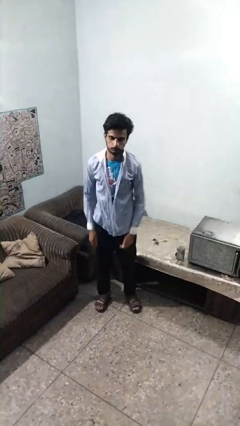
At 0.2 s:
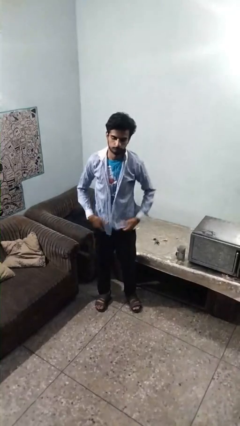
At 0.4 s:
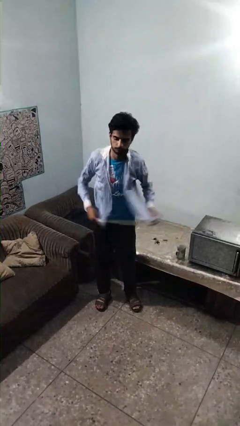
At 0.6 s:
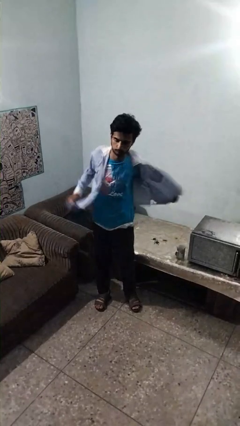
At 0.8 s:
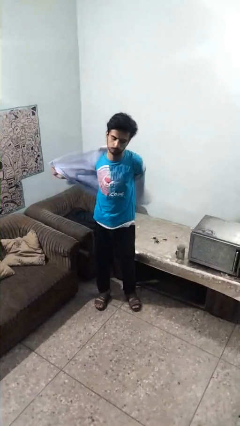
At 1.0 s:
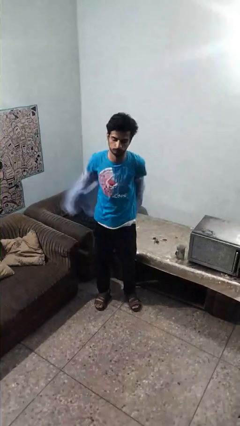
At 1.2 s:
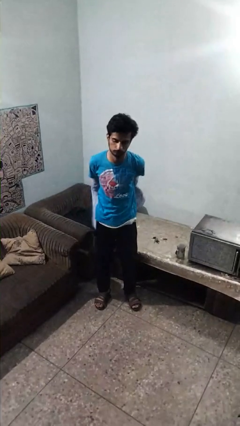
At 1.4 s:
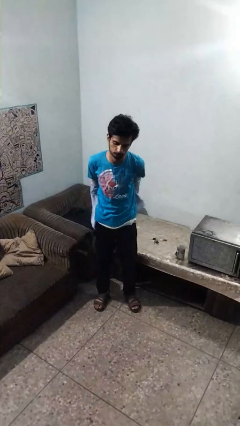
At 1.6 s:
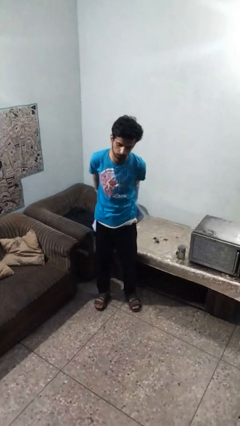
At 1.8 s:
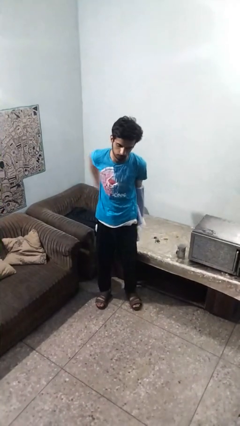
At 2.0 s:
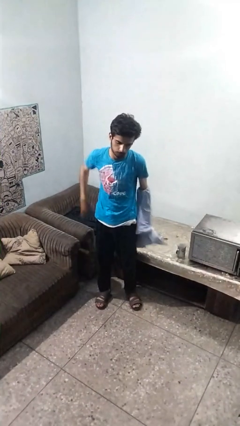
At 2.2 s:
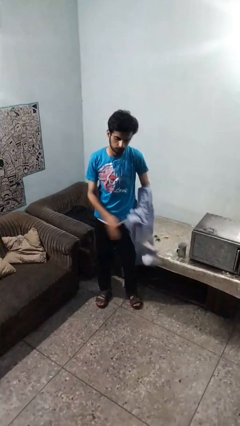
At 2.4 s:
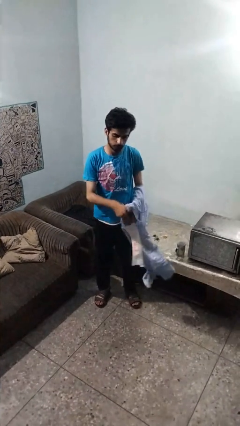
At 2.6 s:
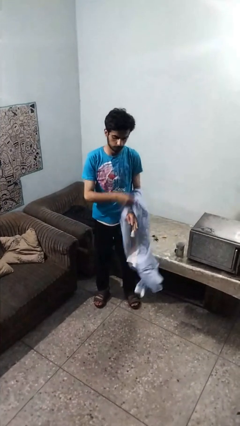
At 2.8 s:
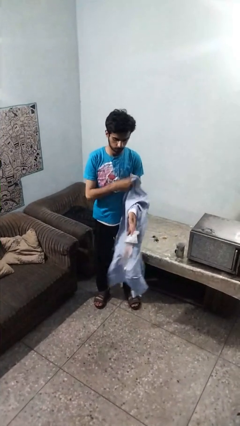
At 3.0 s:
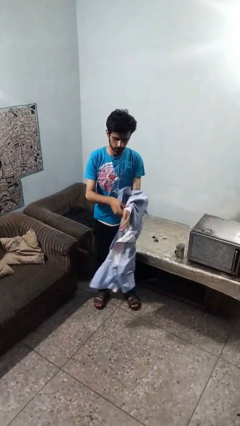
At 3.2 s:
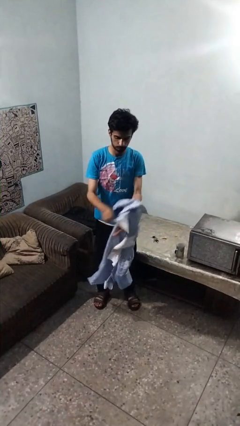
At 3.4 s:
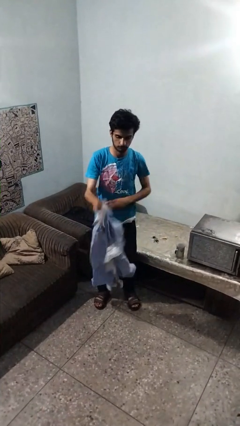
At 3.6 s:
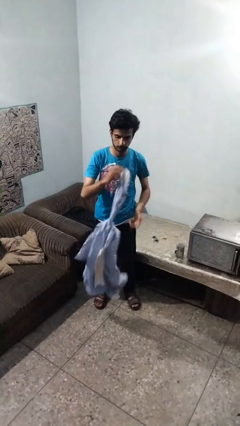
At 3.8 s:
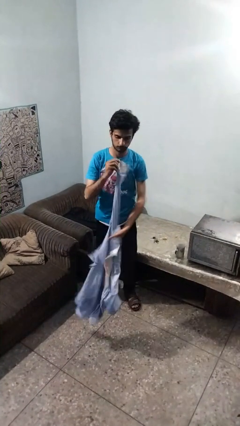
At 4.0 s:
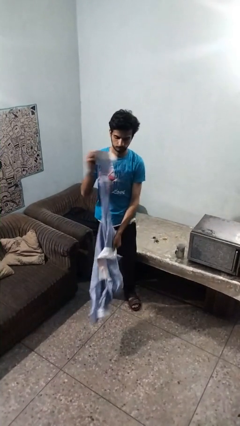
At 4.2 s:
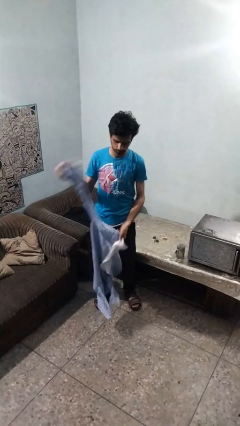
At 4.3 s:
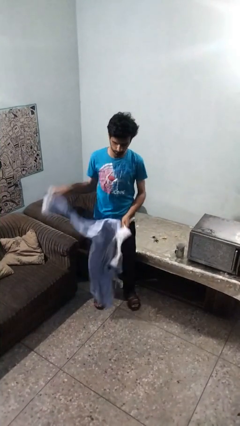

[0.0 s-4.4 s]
person takes off shirt

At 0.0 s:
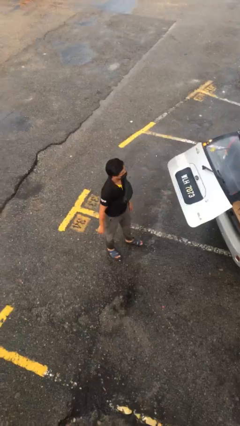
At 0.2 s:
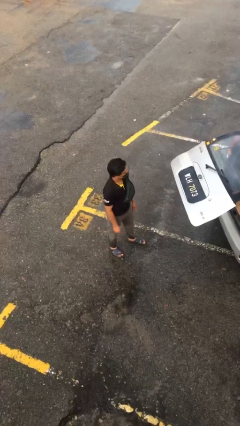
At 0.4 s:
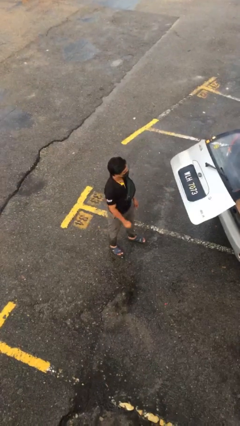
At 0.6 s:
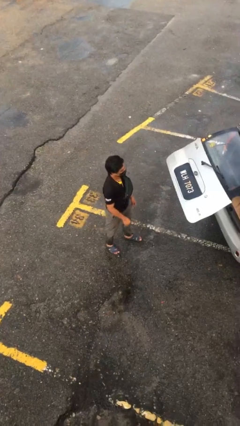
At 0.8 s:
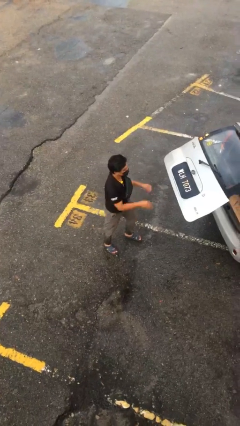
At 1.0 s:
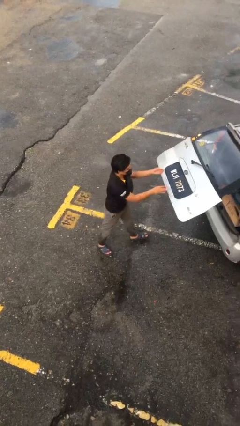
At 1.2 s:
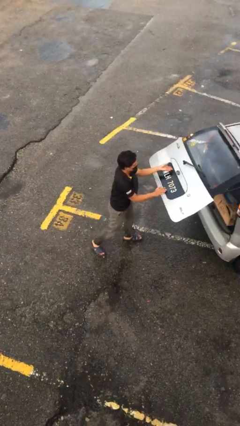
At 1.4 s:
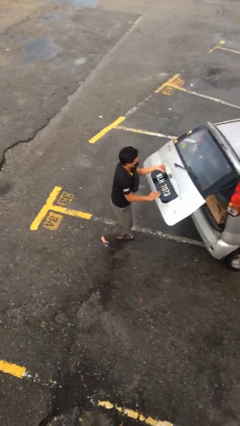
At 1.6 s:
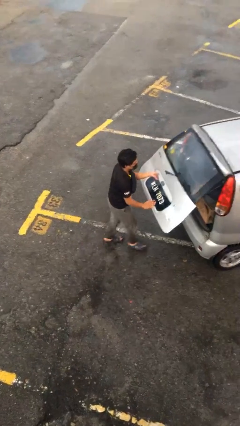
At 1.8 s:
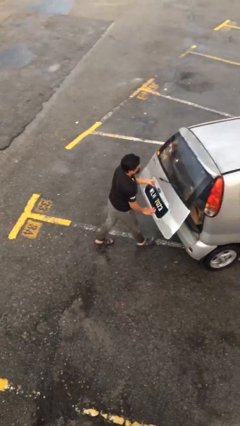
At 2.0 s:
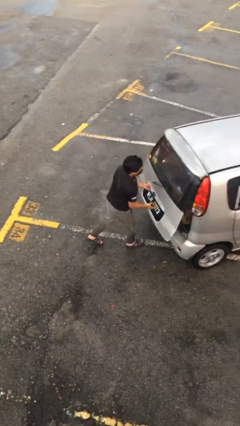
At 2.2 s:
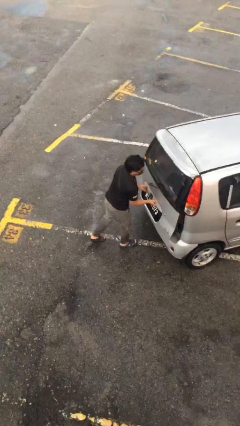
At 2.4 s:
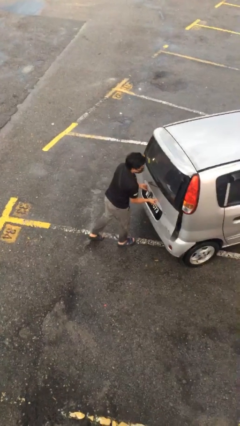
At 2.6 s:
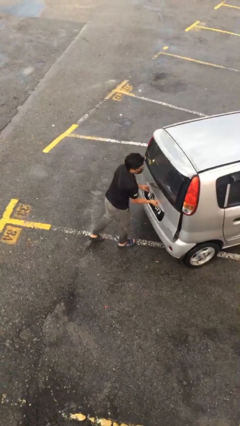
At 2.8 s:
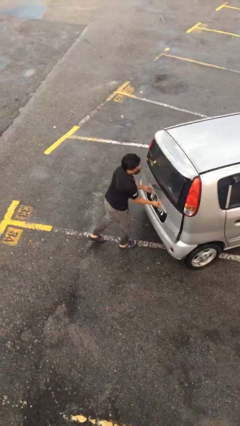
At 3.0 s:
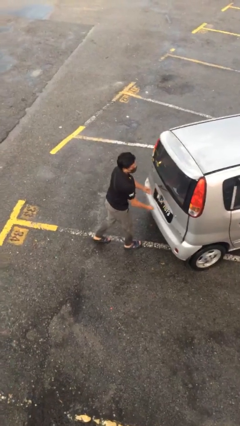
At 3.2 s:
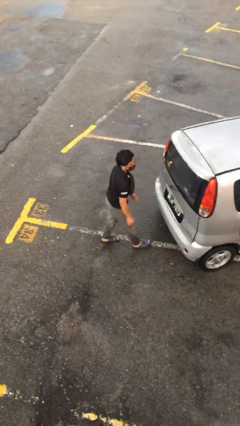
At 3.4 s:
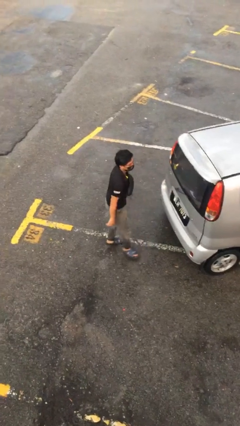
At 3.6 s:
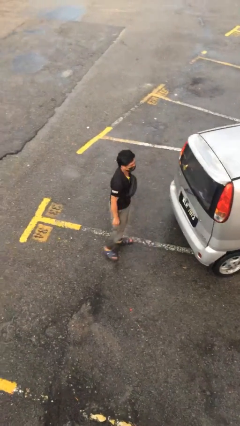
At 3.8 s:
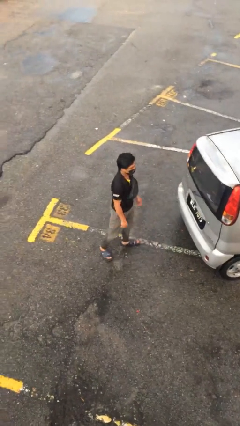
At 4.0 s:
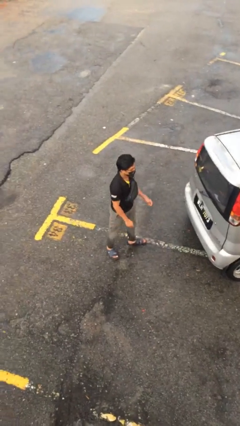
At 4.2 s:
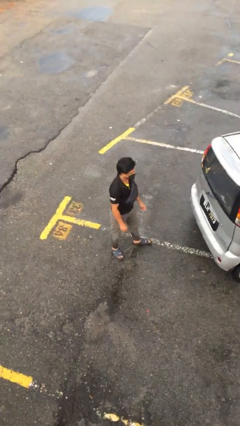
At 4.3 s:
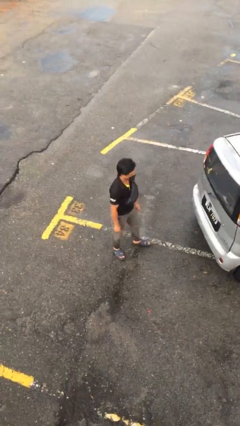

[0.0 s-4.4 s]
person closes car trunk

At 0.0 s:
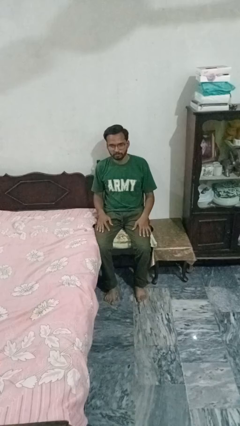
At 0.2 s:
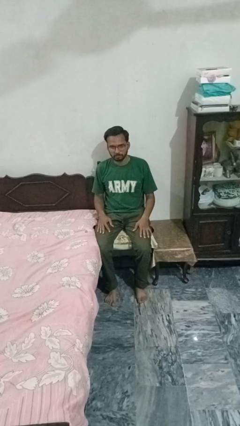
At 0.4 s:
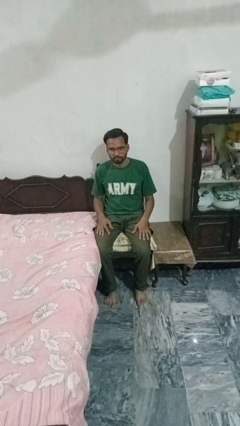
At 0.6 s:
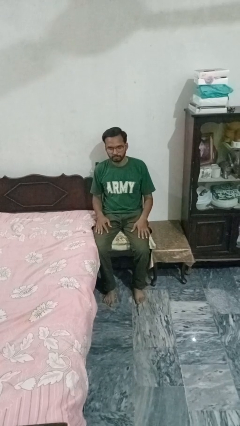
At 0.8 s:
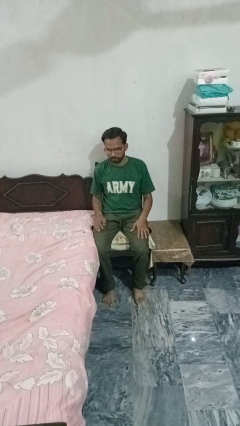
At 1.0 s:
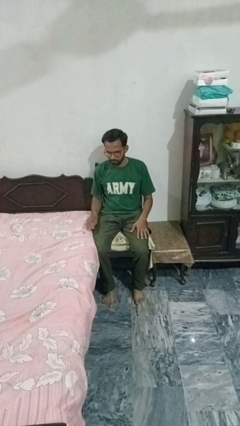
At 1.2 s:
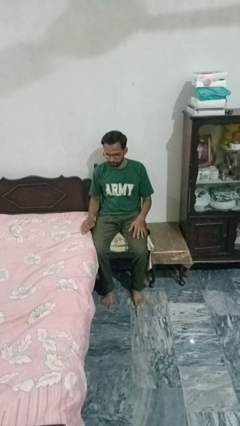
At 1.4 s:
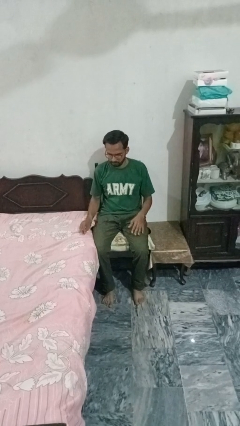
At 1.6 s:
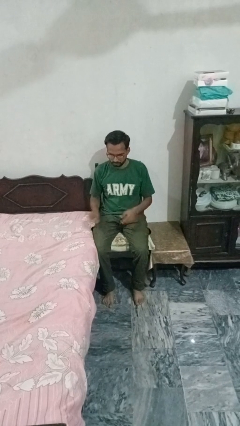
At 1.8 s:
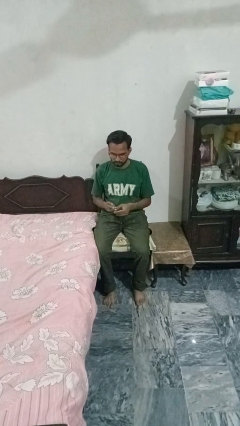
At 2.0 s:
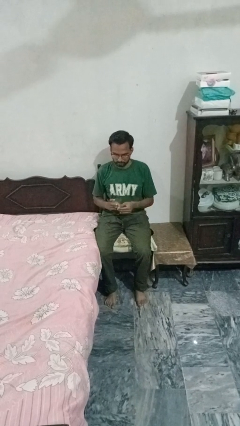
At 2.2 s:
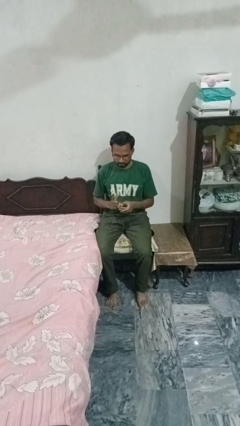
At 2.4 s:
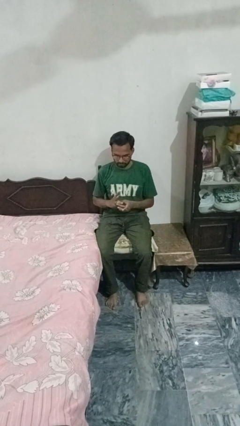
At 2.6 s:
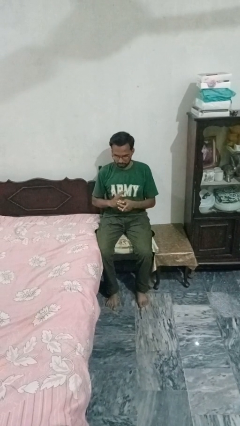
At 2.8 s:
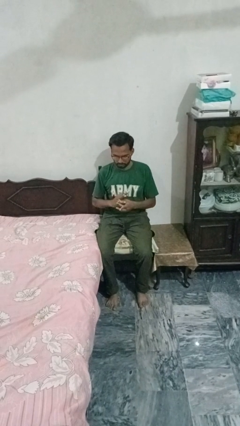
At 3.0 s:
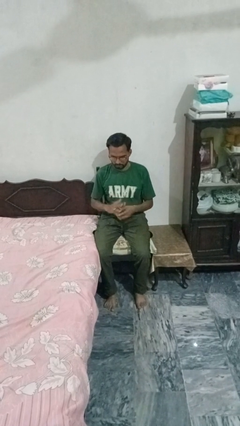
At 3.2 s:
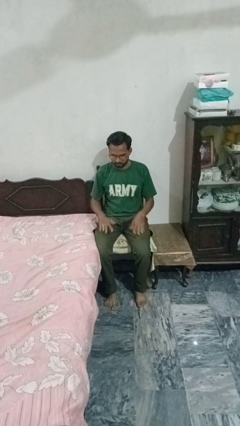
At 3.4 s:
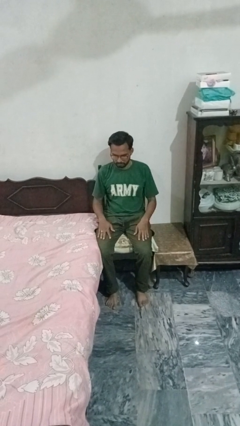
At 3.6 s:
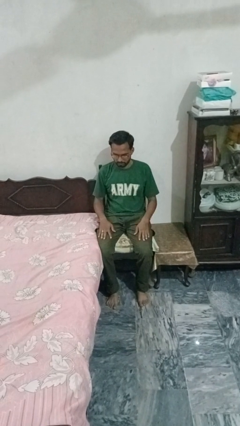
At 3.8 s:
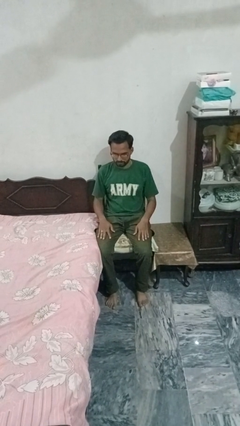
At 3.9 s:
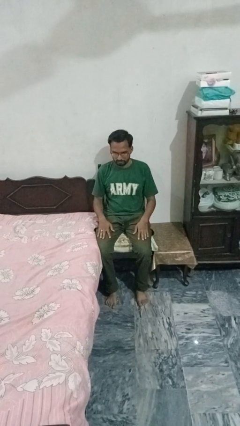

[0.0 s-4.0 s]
person puts on ring

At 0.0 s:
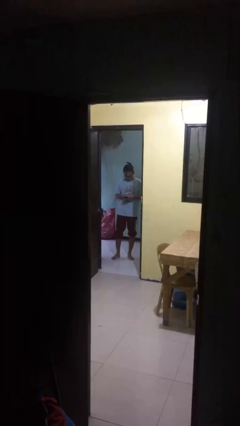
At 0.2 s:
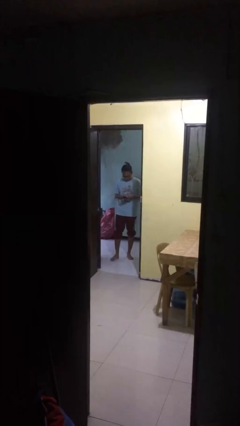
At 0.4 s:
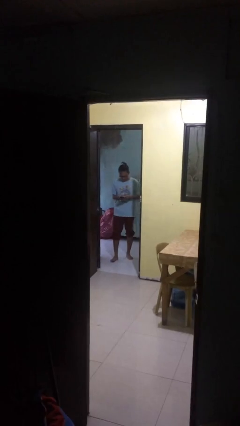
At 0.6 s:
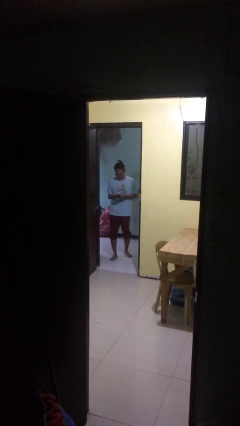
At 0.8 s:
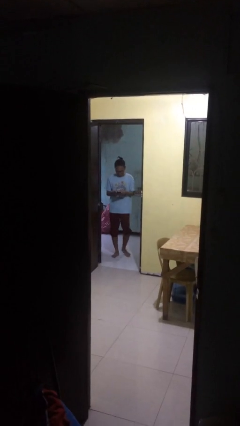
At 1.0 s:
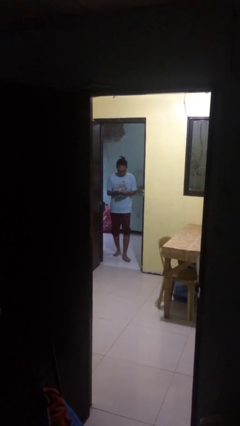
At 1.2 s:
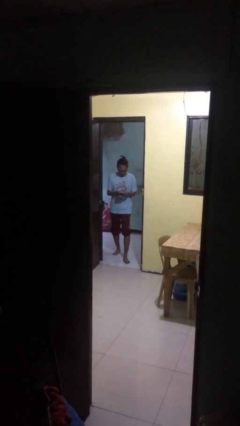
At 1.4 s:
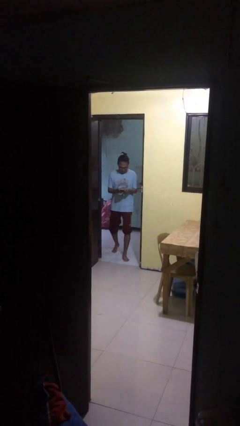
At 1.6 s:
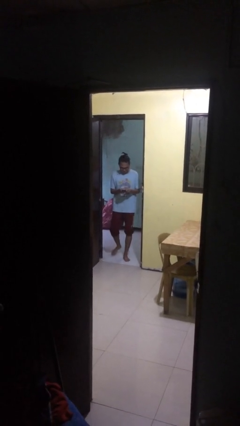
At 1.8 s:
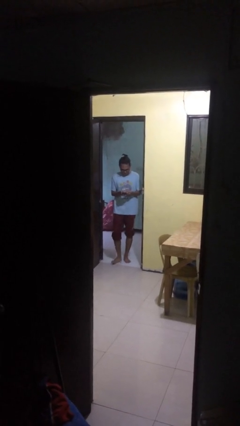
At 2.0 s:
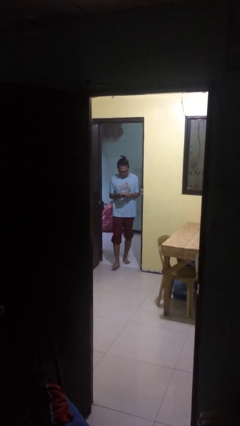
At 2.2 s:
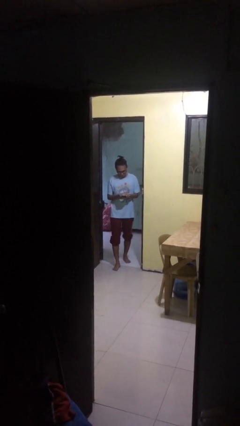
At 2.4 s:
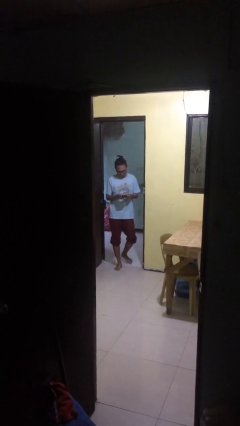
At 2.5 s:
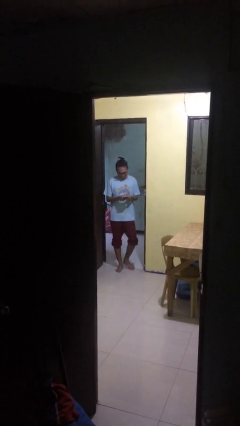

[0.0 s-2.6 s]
person texts on phone

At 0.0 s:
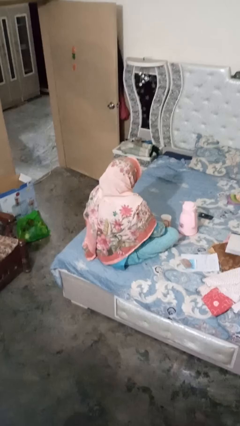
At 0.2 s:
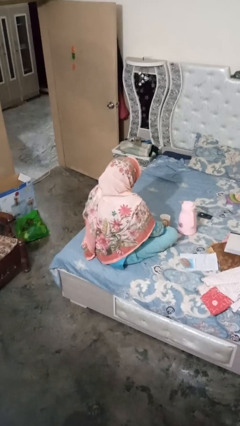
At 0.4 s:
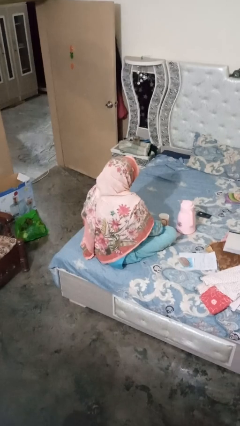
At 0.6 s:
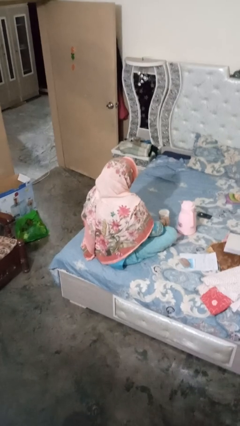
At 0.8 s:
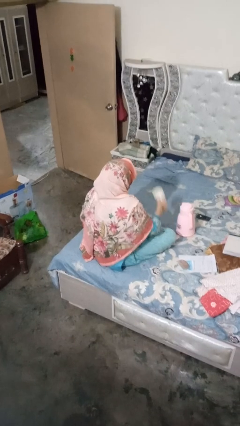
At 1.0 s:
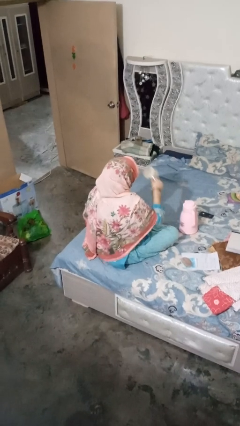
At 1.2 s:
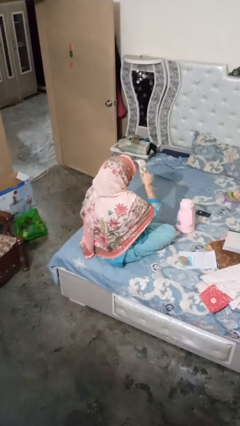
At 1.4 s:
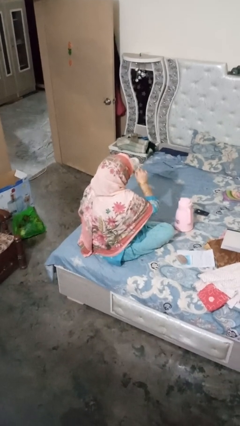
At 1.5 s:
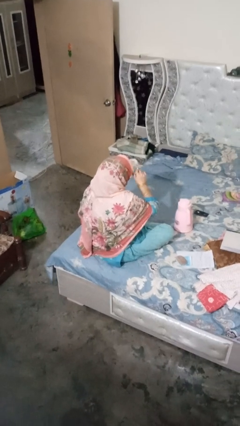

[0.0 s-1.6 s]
person pours coffee into mug

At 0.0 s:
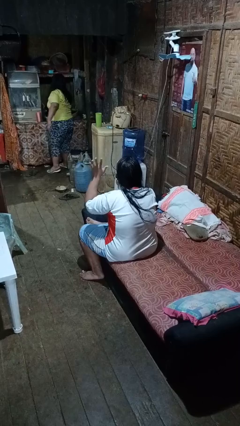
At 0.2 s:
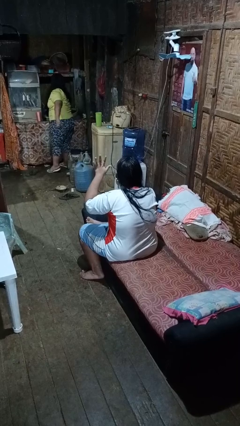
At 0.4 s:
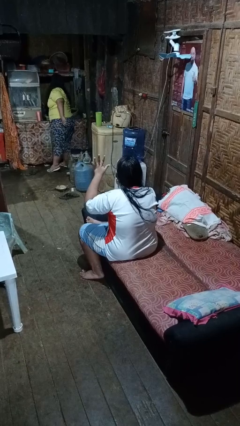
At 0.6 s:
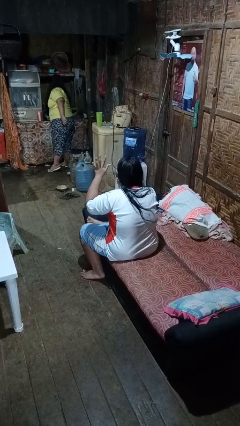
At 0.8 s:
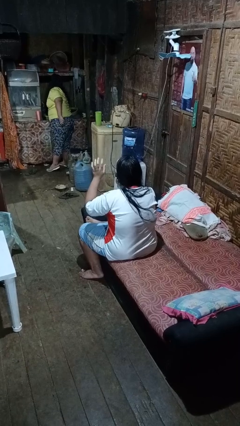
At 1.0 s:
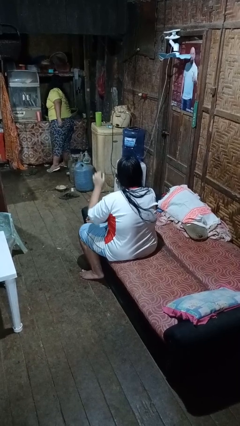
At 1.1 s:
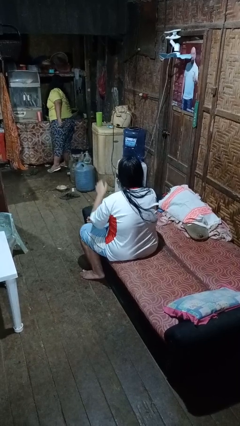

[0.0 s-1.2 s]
person gestures number five
